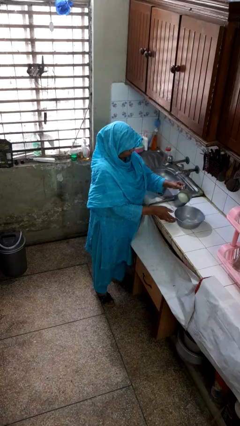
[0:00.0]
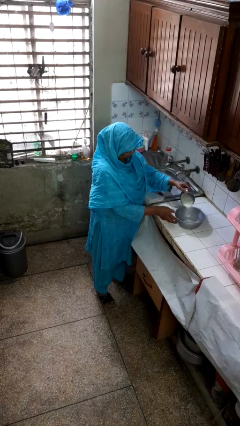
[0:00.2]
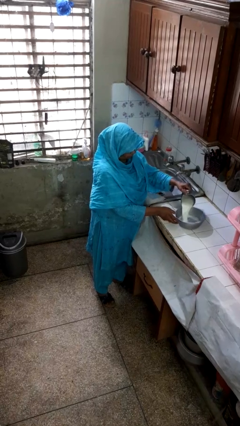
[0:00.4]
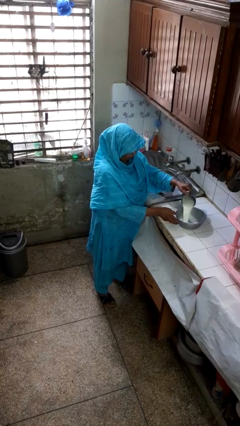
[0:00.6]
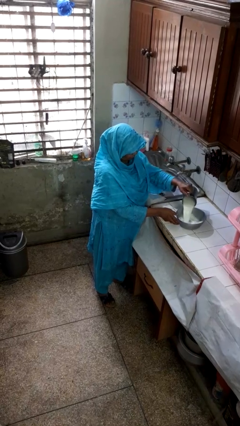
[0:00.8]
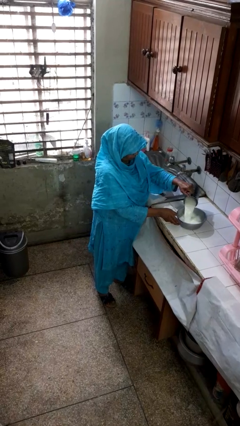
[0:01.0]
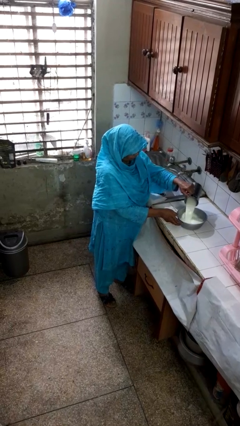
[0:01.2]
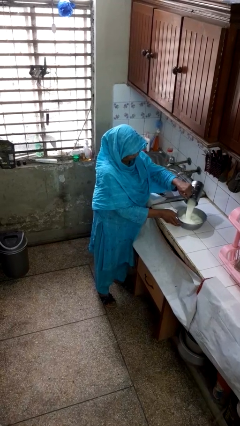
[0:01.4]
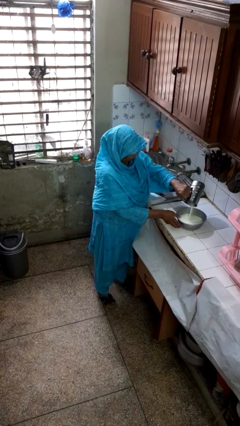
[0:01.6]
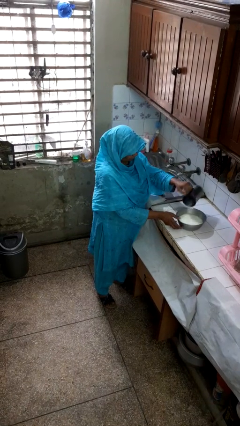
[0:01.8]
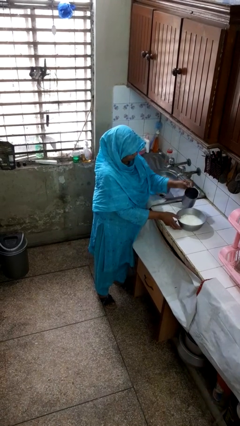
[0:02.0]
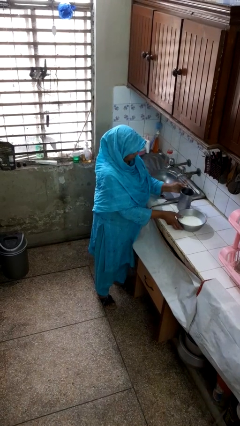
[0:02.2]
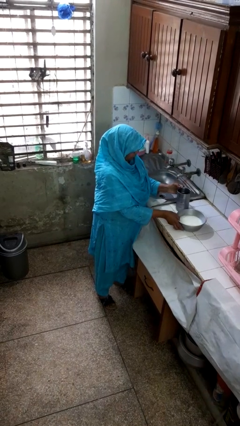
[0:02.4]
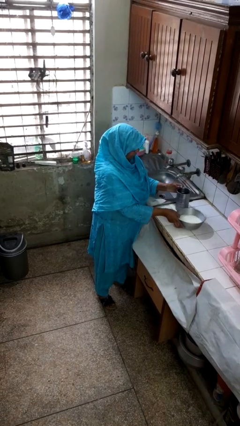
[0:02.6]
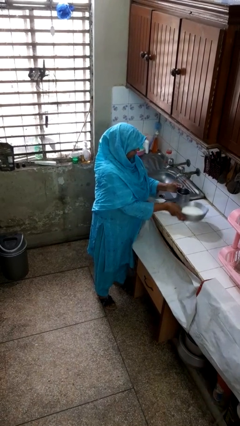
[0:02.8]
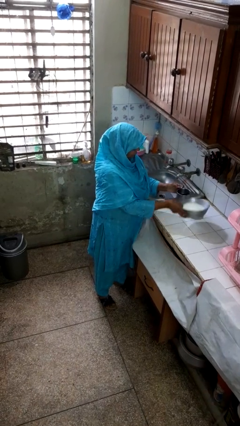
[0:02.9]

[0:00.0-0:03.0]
person pours into bowl

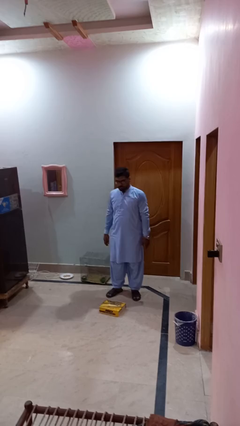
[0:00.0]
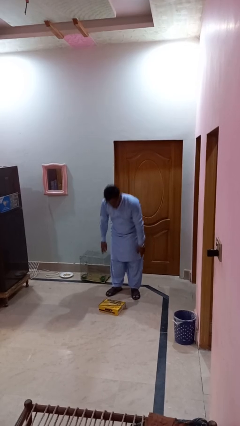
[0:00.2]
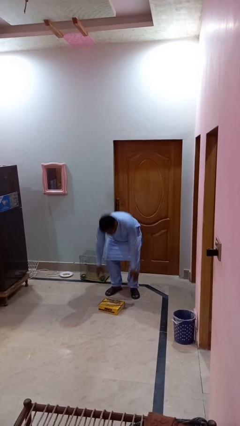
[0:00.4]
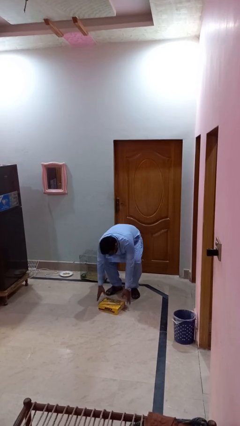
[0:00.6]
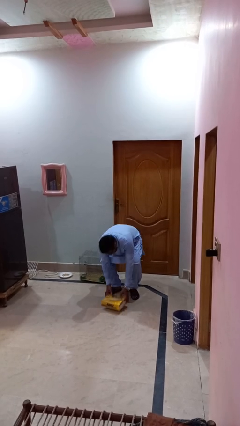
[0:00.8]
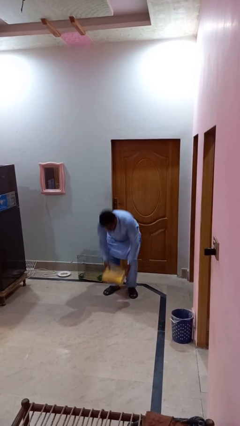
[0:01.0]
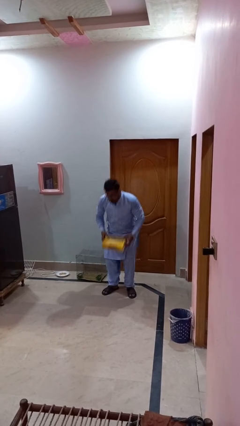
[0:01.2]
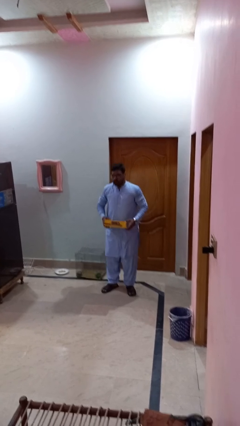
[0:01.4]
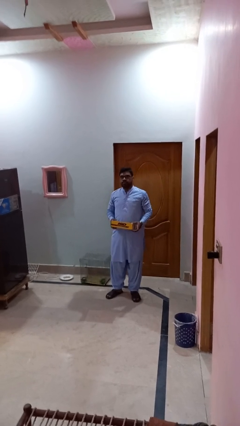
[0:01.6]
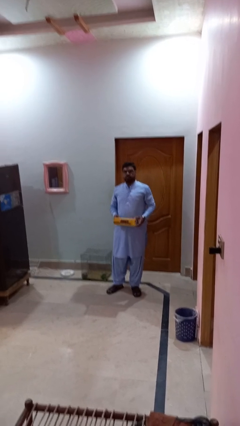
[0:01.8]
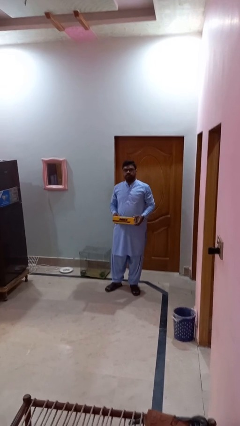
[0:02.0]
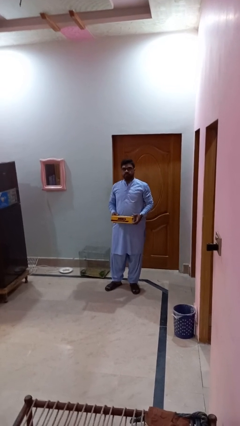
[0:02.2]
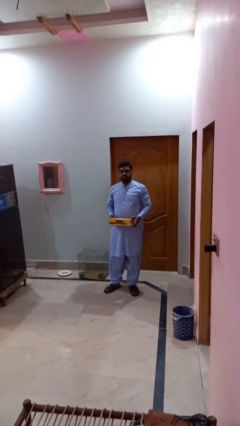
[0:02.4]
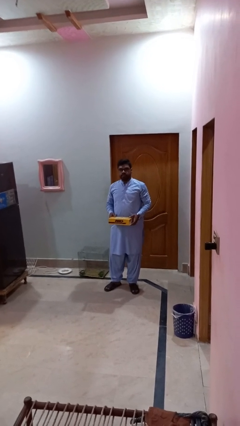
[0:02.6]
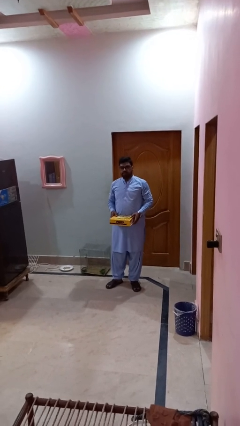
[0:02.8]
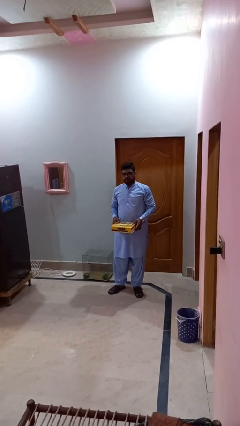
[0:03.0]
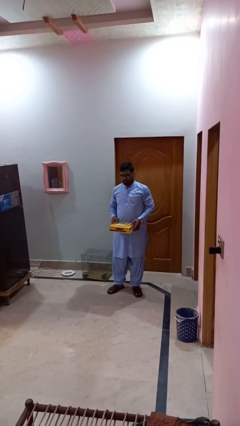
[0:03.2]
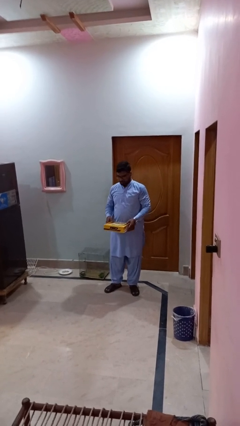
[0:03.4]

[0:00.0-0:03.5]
person picks up object from floor

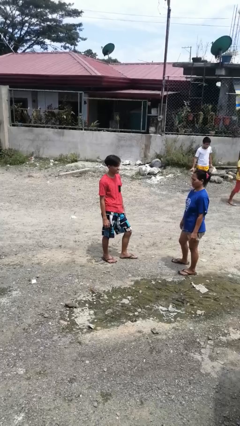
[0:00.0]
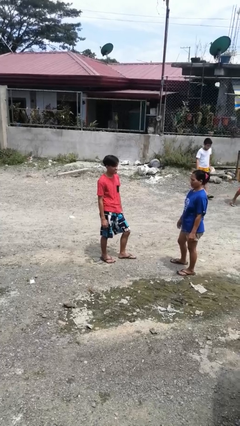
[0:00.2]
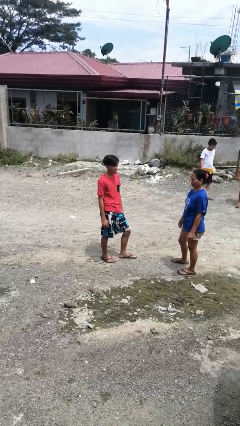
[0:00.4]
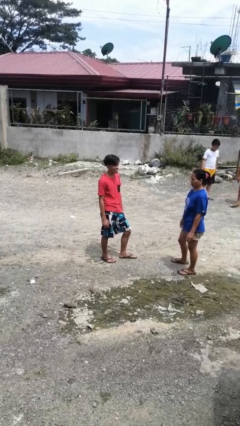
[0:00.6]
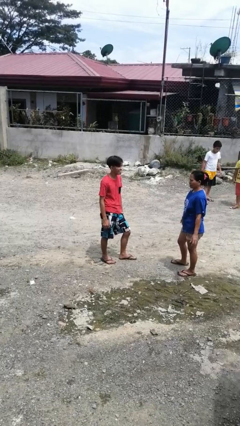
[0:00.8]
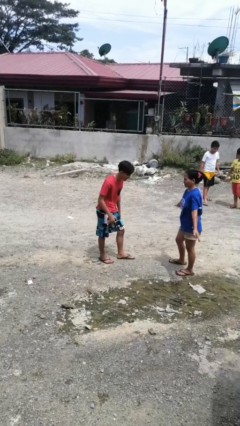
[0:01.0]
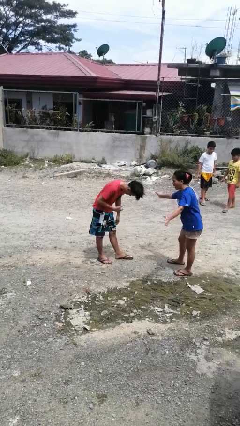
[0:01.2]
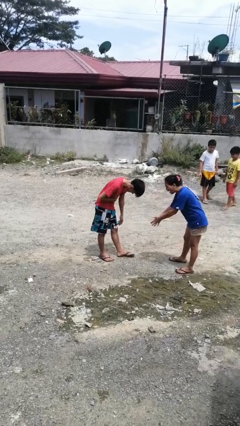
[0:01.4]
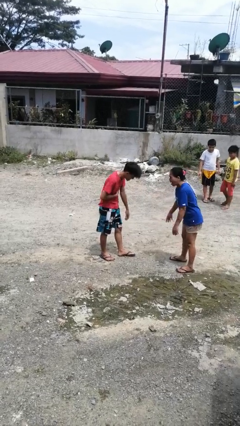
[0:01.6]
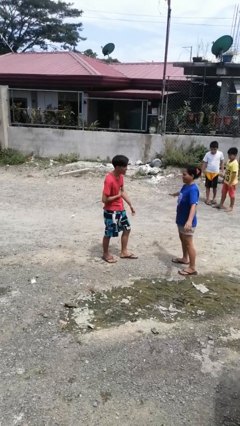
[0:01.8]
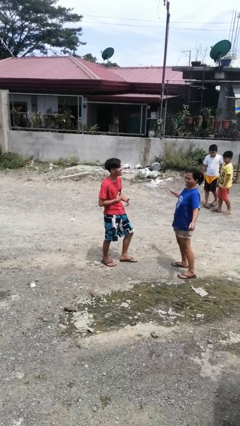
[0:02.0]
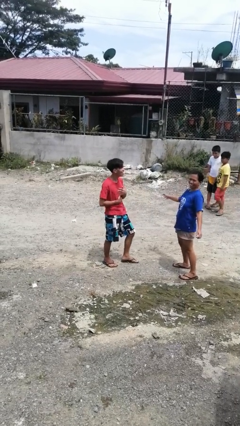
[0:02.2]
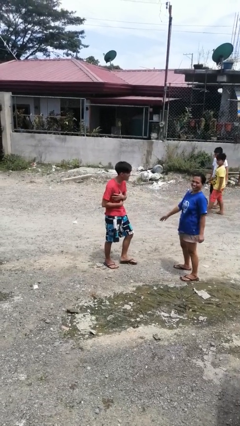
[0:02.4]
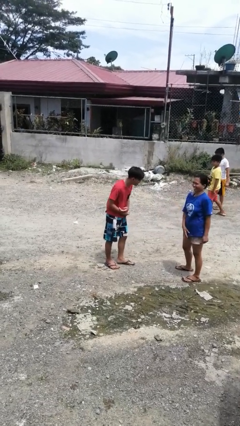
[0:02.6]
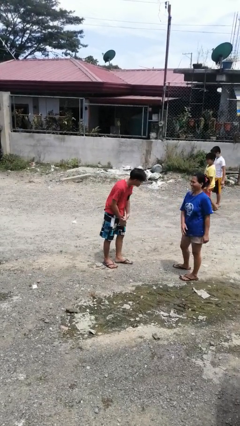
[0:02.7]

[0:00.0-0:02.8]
person laughs with person

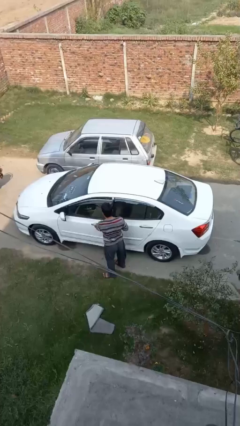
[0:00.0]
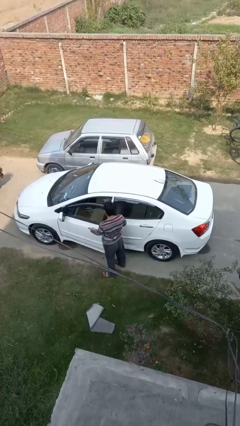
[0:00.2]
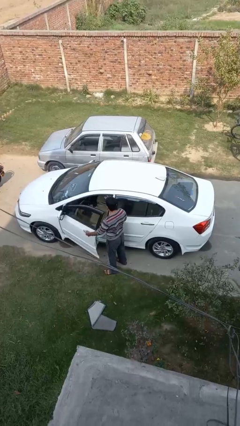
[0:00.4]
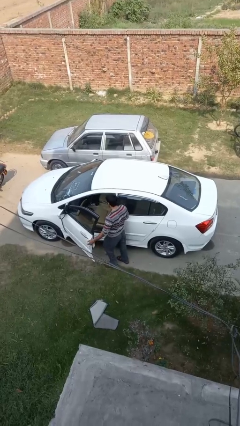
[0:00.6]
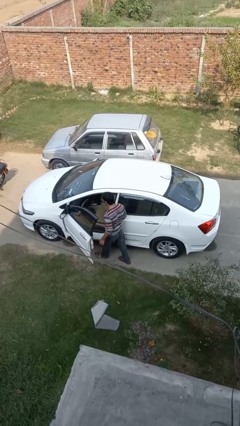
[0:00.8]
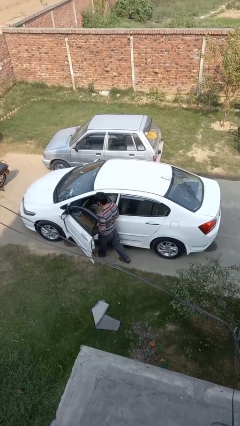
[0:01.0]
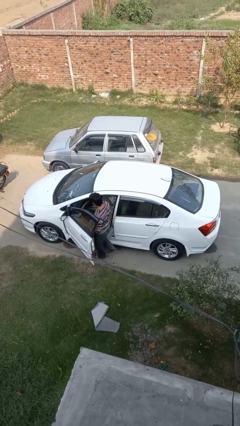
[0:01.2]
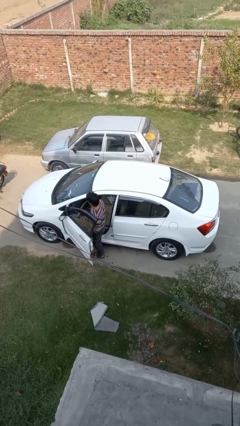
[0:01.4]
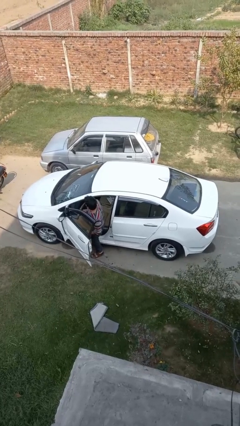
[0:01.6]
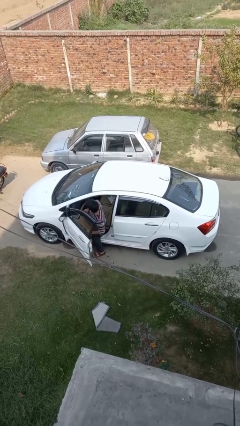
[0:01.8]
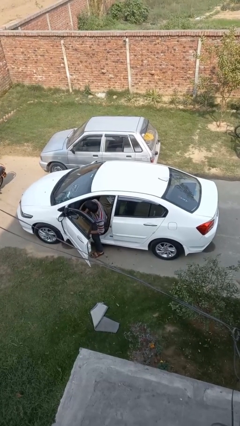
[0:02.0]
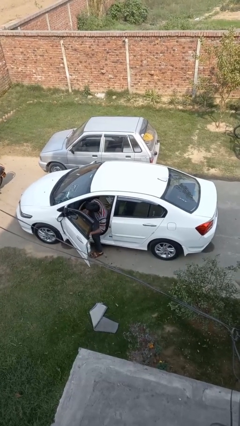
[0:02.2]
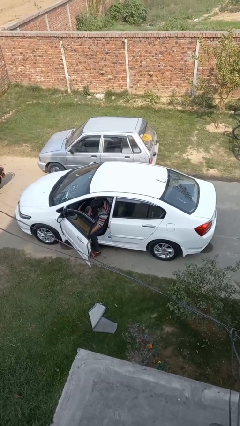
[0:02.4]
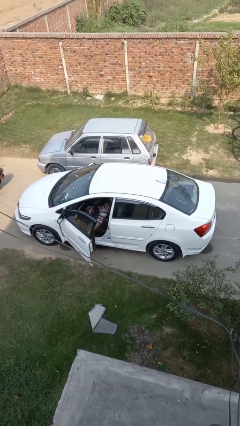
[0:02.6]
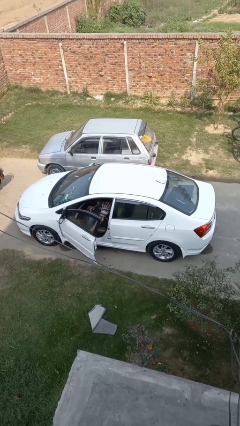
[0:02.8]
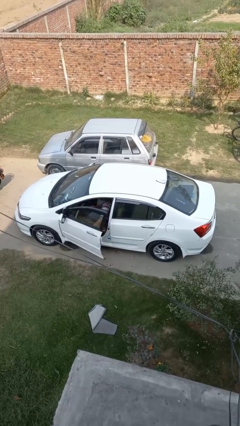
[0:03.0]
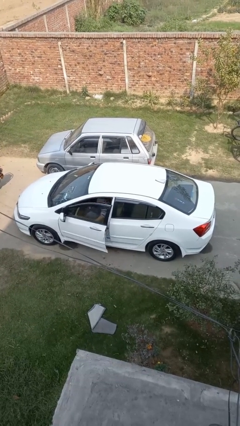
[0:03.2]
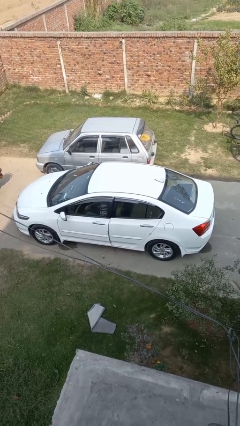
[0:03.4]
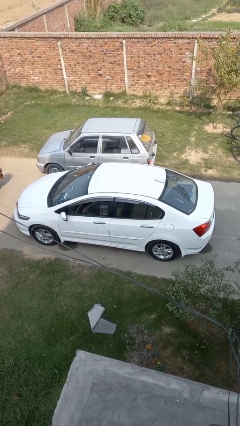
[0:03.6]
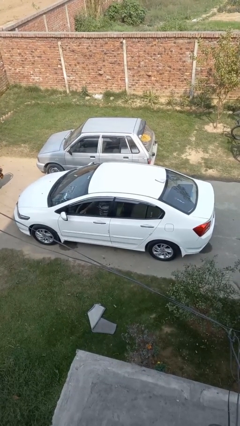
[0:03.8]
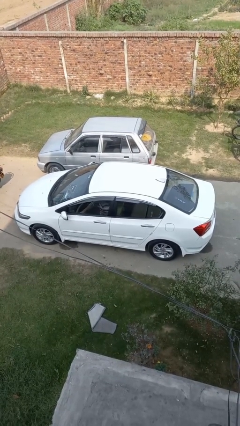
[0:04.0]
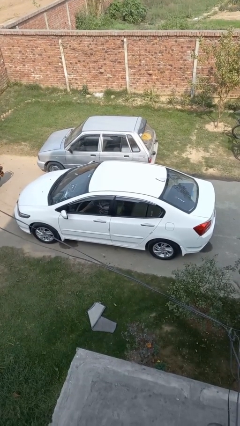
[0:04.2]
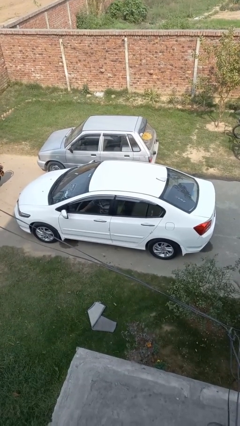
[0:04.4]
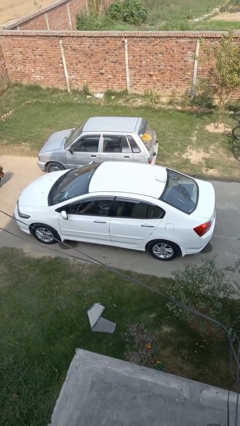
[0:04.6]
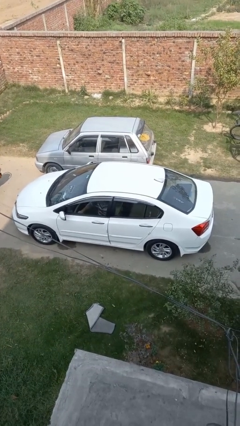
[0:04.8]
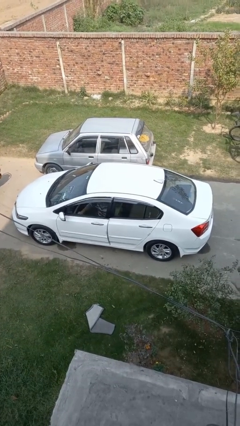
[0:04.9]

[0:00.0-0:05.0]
car picks up person

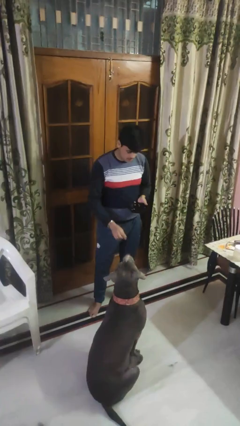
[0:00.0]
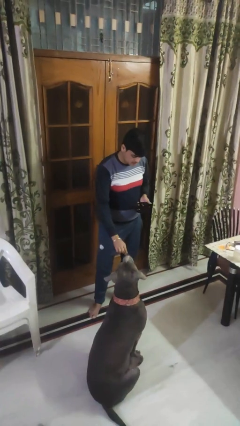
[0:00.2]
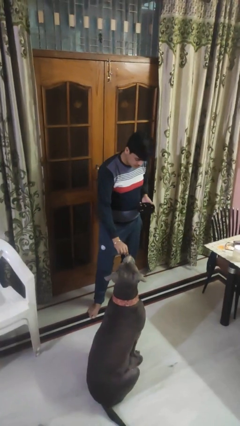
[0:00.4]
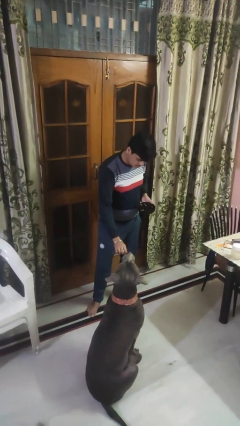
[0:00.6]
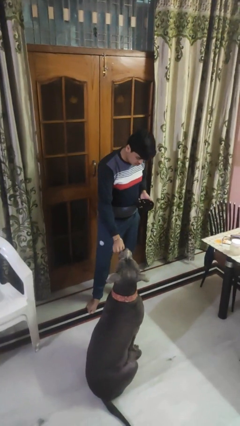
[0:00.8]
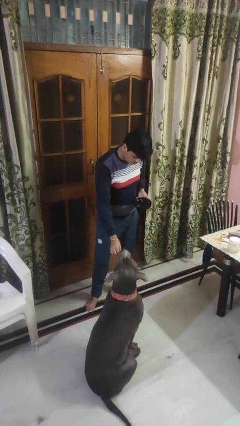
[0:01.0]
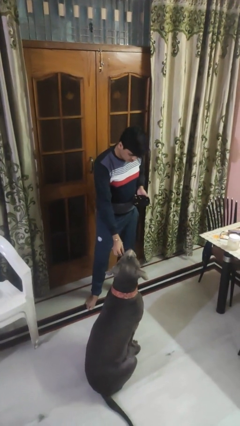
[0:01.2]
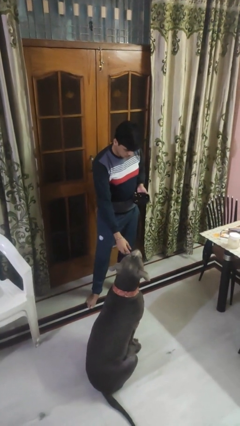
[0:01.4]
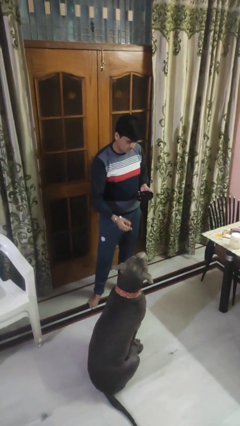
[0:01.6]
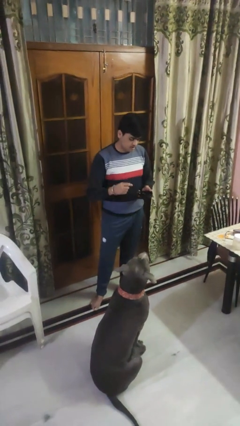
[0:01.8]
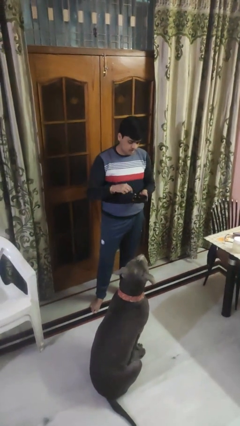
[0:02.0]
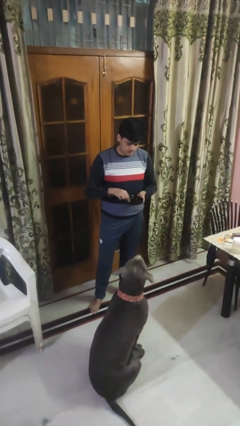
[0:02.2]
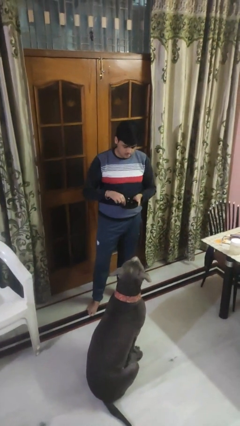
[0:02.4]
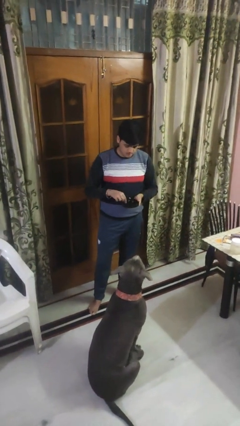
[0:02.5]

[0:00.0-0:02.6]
person feeds dog

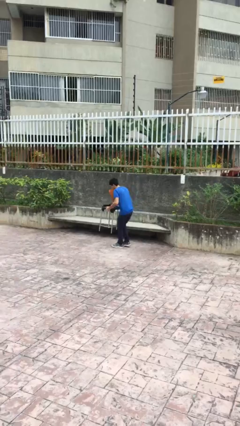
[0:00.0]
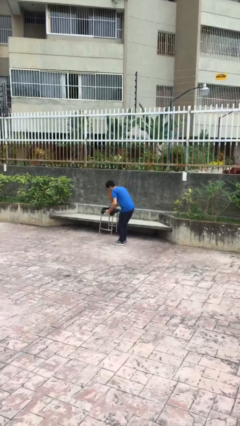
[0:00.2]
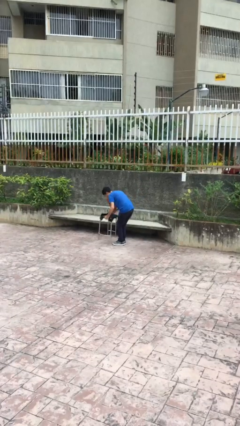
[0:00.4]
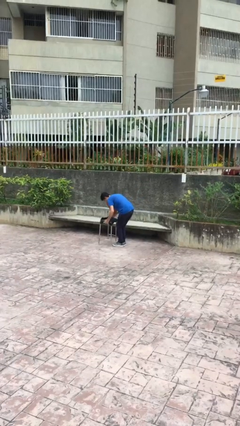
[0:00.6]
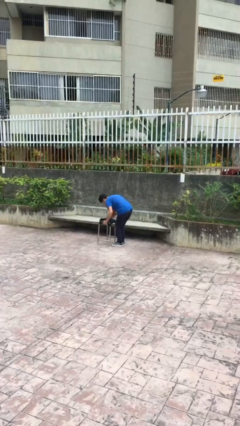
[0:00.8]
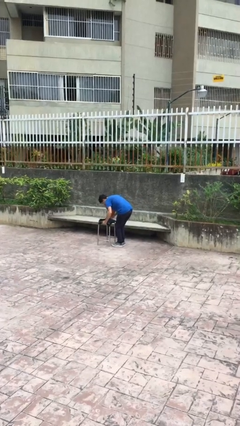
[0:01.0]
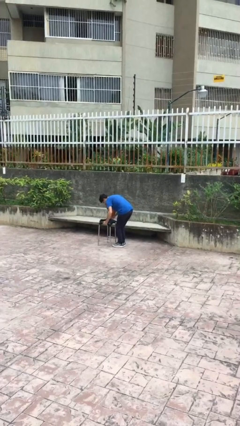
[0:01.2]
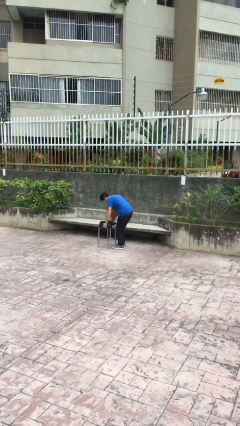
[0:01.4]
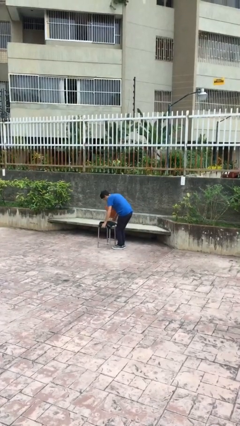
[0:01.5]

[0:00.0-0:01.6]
person puts down object on floor
